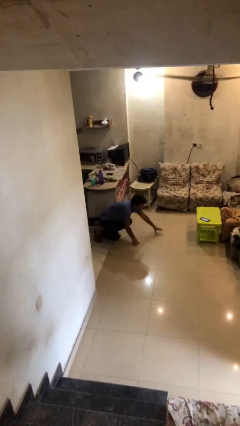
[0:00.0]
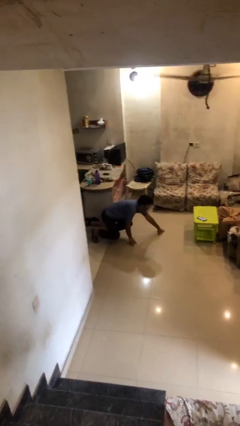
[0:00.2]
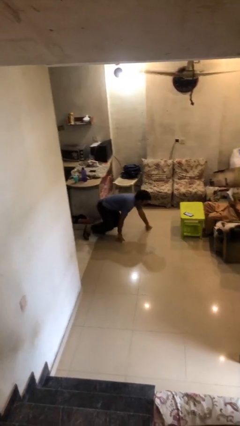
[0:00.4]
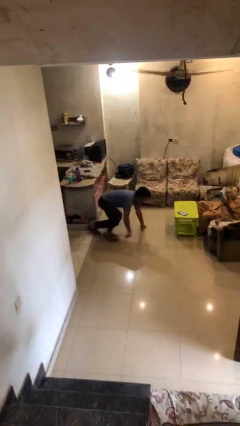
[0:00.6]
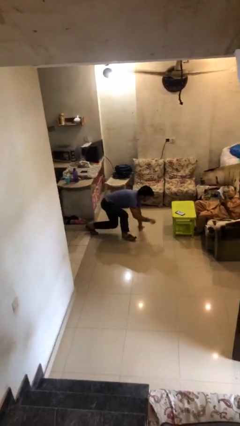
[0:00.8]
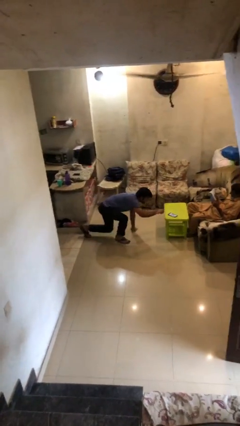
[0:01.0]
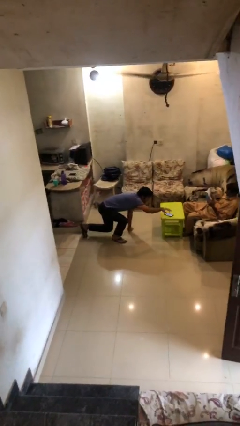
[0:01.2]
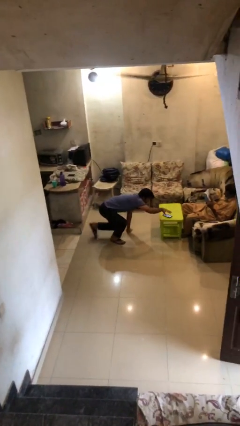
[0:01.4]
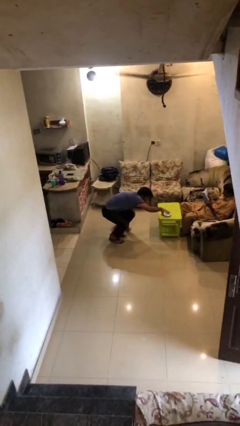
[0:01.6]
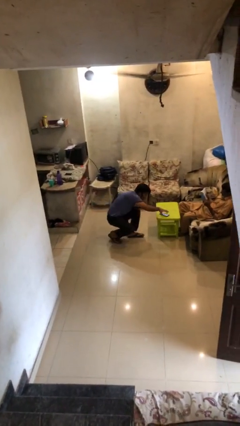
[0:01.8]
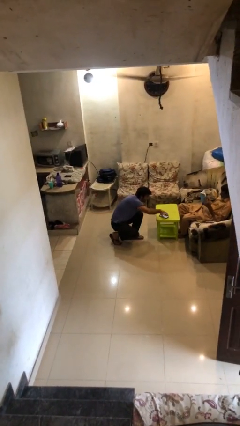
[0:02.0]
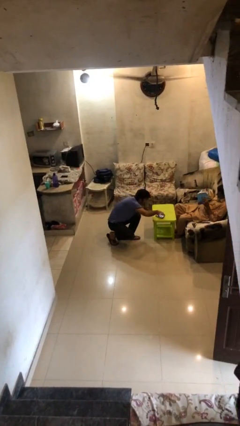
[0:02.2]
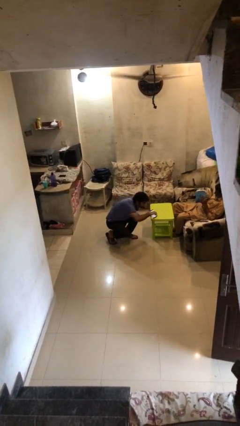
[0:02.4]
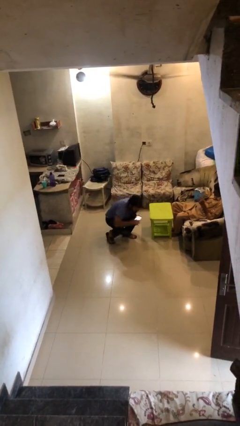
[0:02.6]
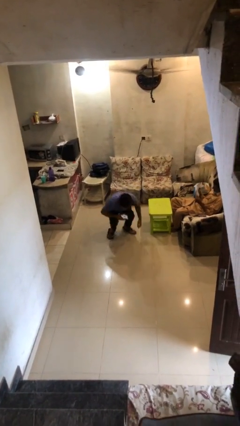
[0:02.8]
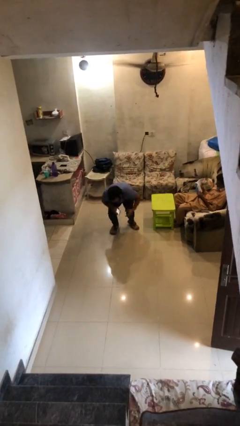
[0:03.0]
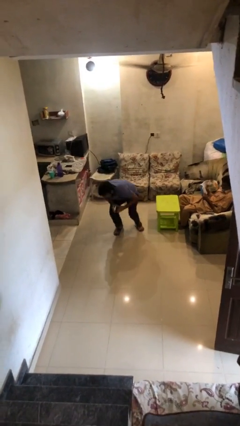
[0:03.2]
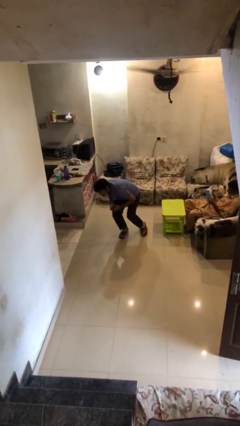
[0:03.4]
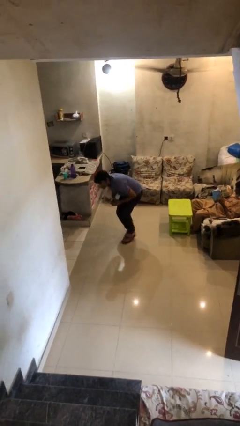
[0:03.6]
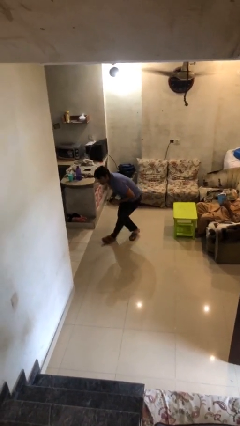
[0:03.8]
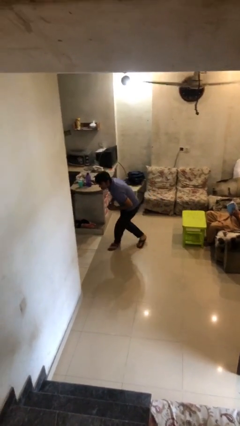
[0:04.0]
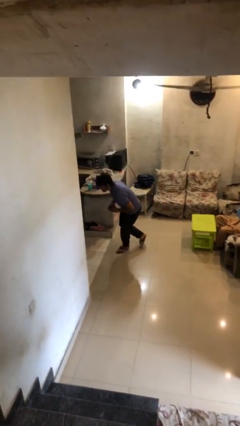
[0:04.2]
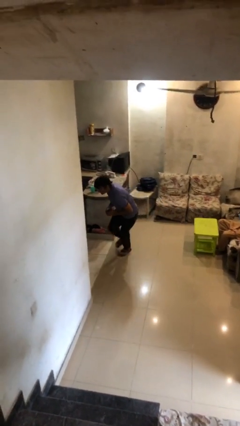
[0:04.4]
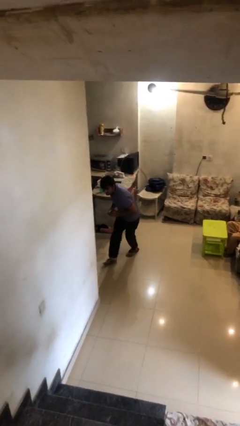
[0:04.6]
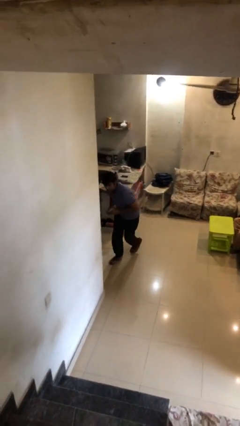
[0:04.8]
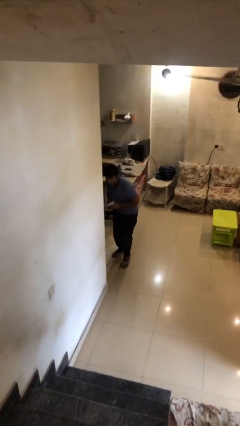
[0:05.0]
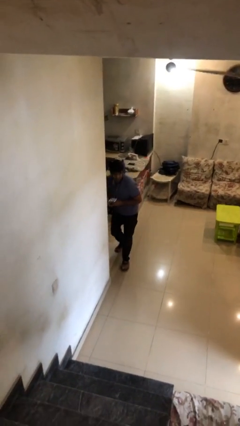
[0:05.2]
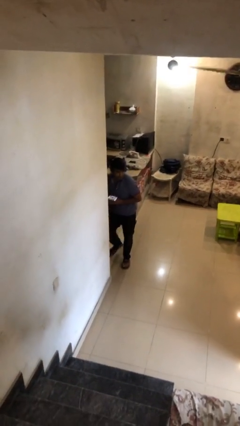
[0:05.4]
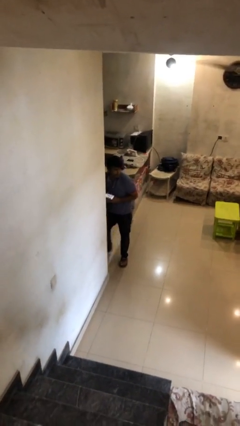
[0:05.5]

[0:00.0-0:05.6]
person steals object from person

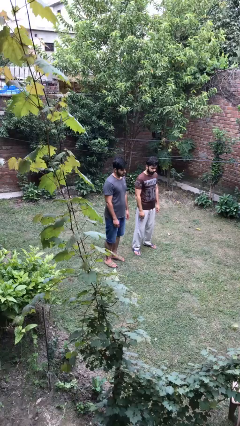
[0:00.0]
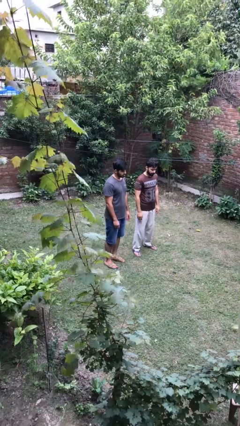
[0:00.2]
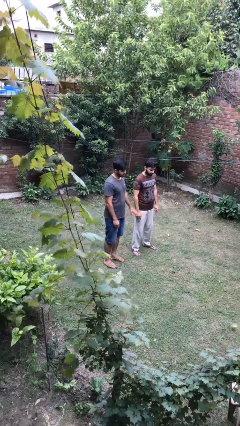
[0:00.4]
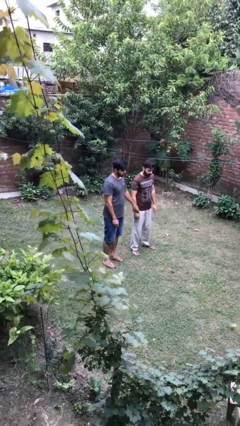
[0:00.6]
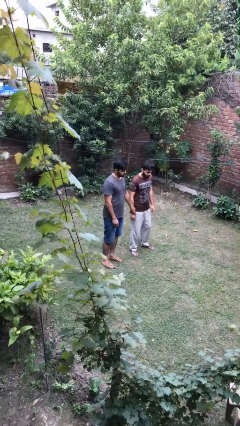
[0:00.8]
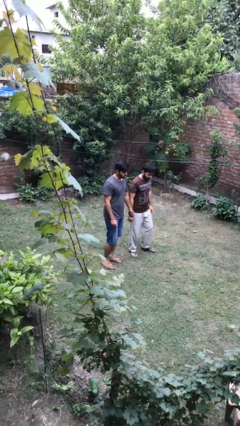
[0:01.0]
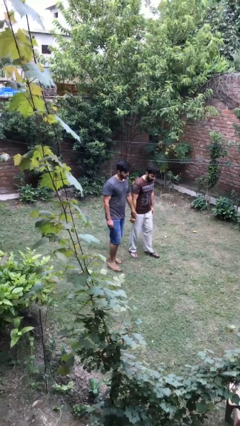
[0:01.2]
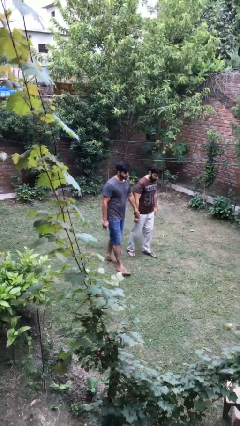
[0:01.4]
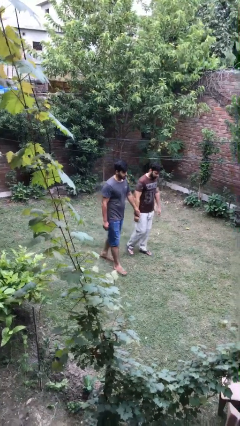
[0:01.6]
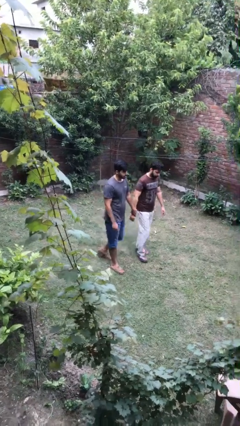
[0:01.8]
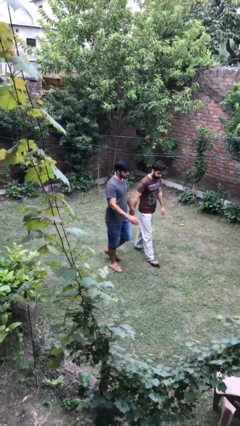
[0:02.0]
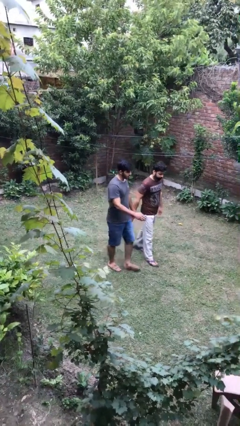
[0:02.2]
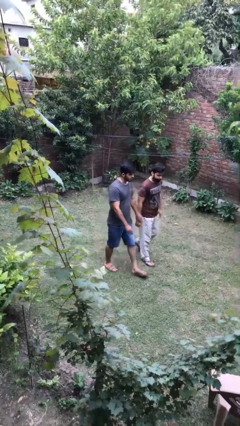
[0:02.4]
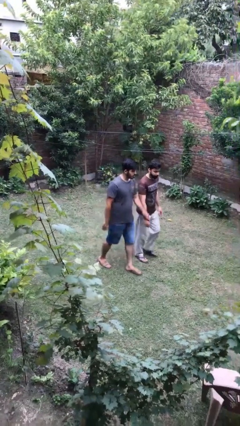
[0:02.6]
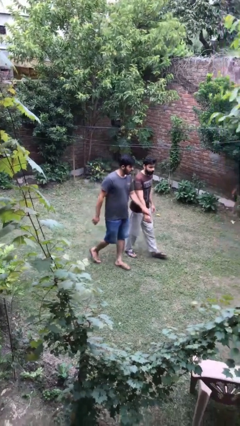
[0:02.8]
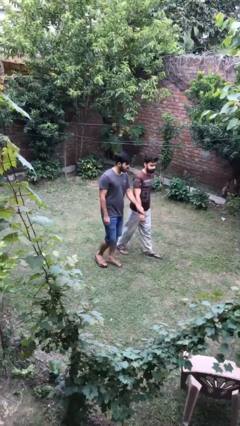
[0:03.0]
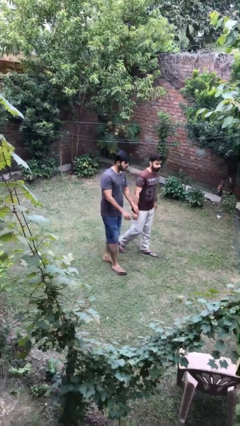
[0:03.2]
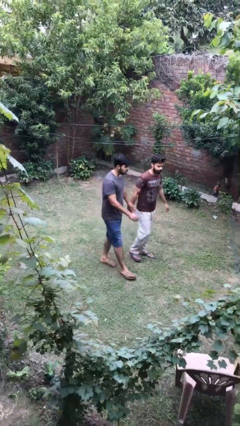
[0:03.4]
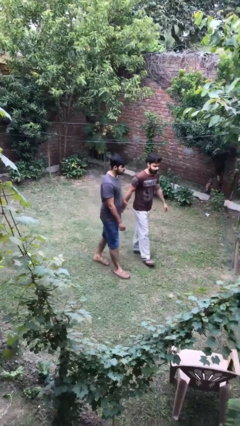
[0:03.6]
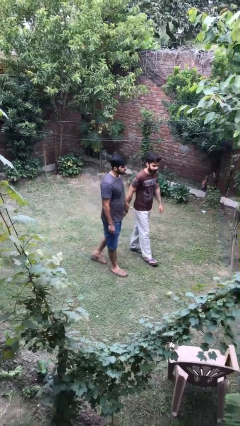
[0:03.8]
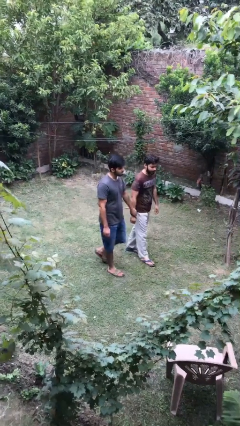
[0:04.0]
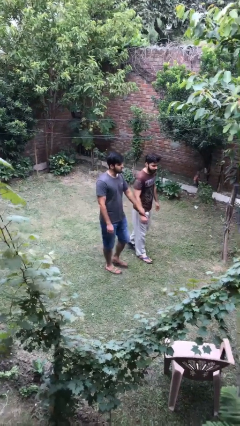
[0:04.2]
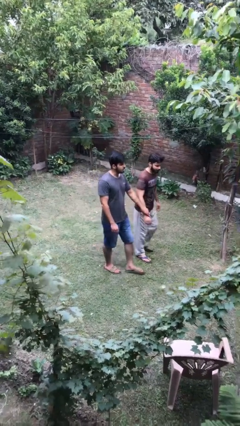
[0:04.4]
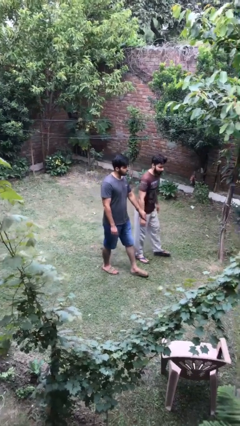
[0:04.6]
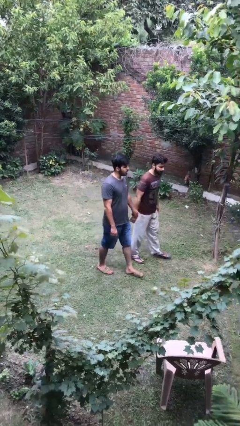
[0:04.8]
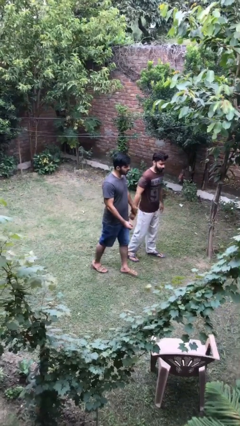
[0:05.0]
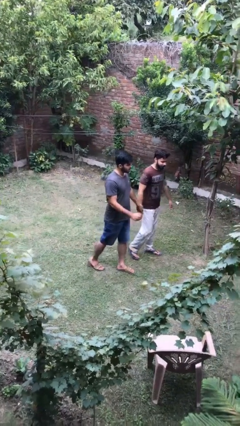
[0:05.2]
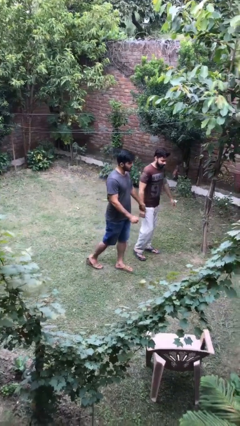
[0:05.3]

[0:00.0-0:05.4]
person holds hand

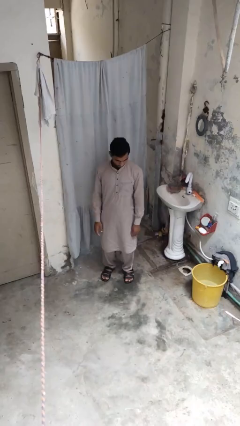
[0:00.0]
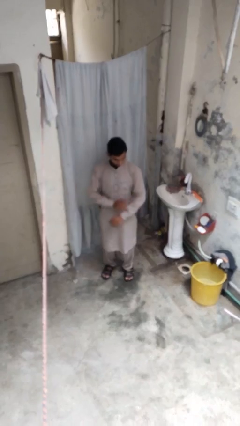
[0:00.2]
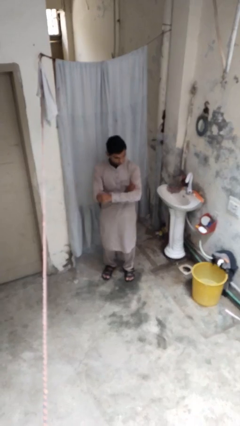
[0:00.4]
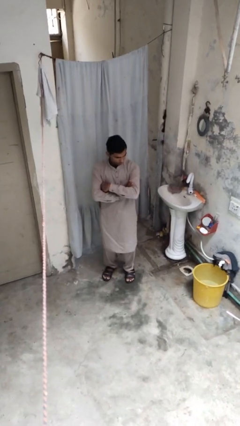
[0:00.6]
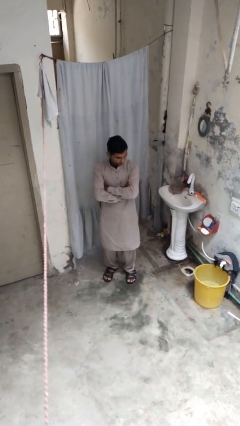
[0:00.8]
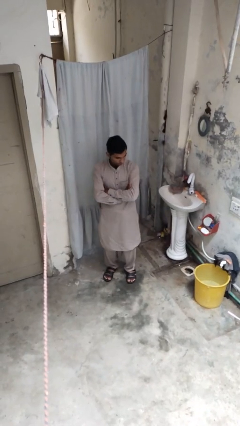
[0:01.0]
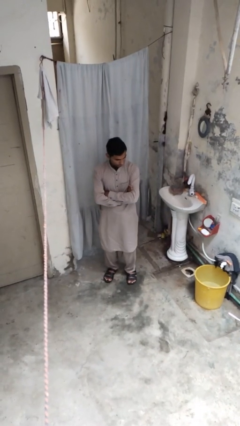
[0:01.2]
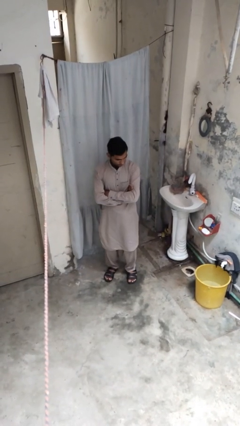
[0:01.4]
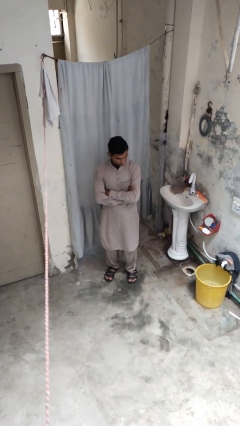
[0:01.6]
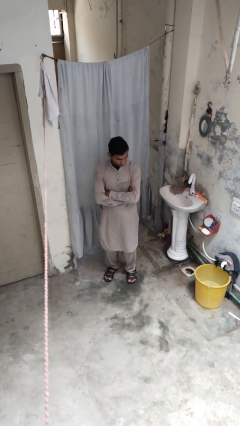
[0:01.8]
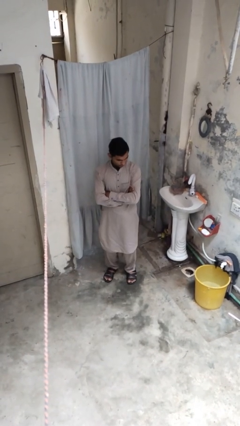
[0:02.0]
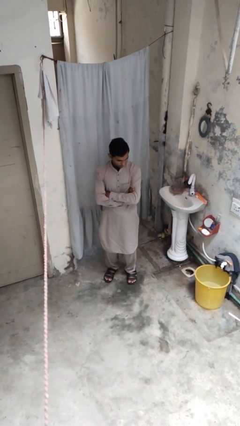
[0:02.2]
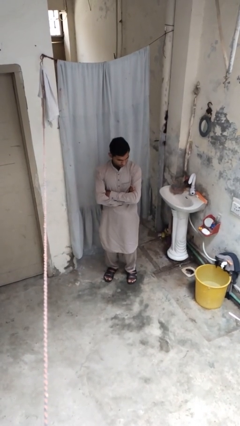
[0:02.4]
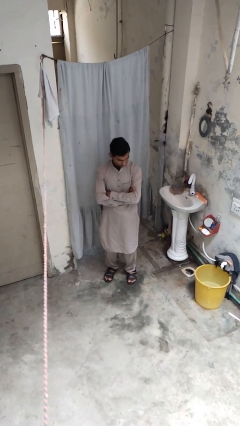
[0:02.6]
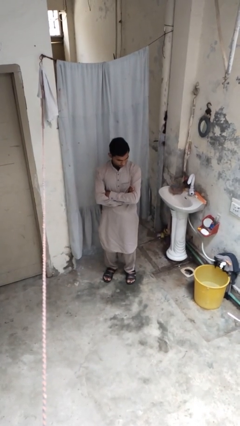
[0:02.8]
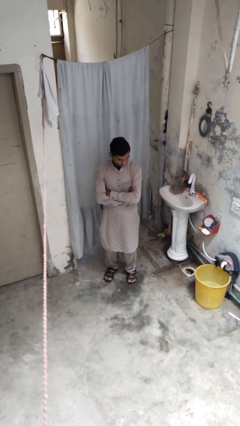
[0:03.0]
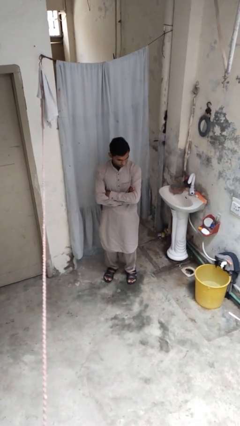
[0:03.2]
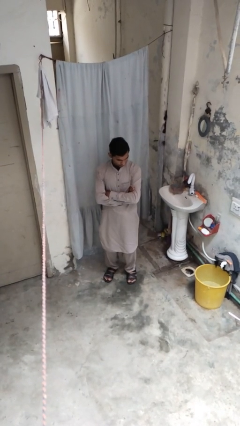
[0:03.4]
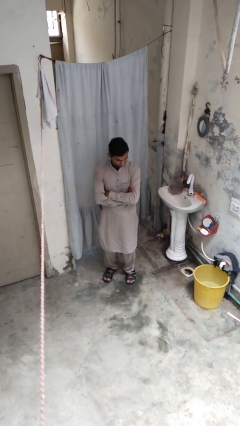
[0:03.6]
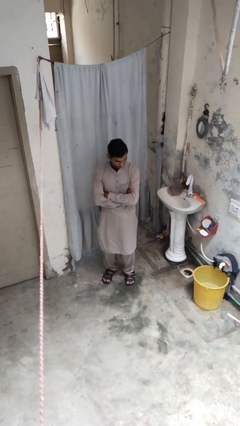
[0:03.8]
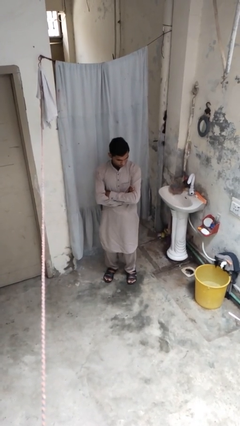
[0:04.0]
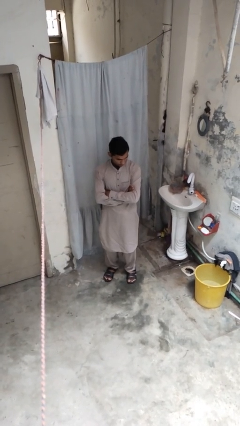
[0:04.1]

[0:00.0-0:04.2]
person crosses arms

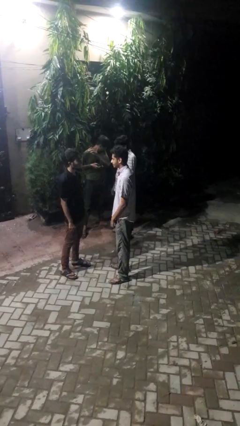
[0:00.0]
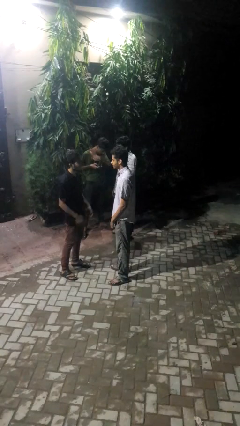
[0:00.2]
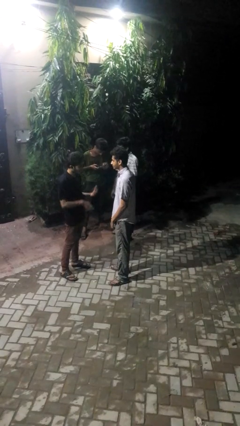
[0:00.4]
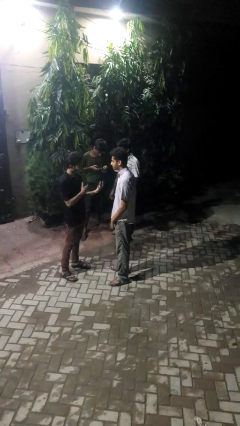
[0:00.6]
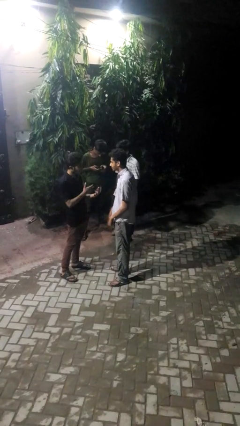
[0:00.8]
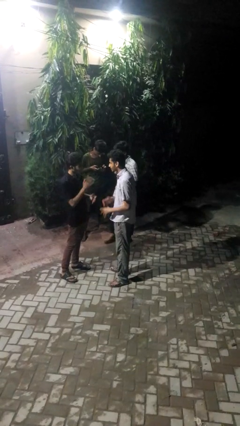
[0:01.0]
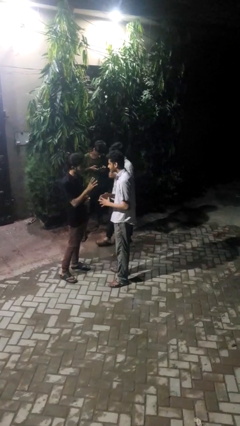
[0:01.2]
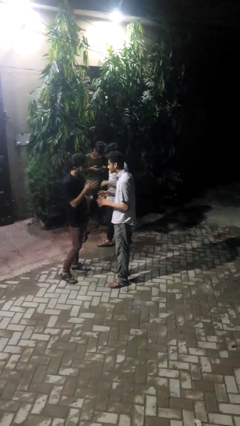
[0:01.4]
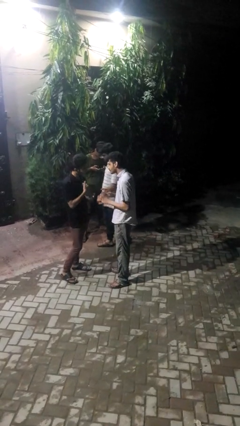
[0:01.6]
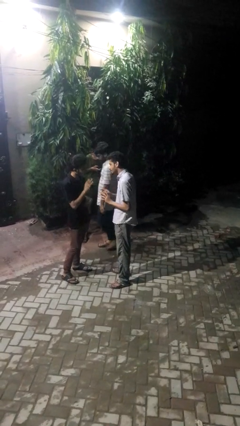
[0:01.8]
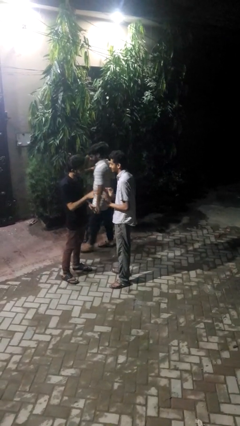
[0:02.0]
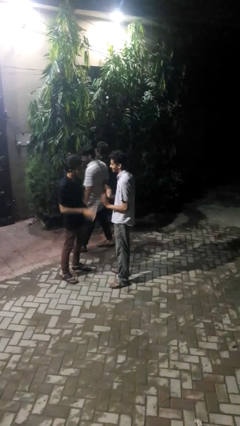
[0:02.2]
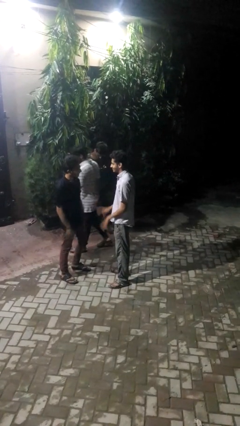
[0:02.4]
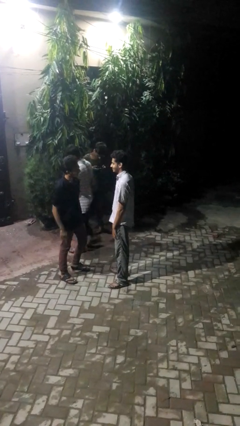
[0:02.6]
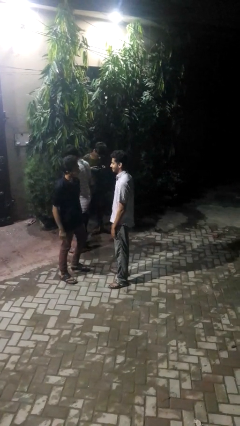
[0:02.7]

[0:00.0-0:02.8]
person talks to person
